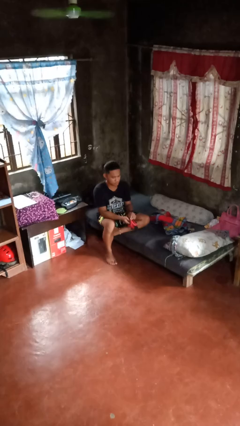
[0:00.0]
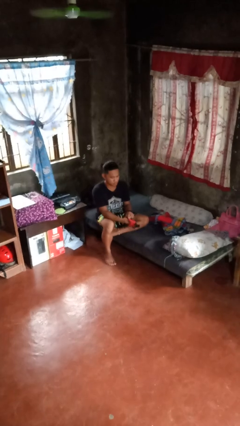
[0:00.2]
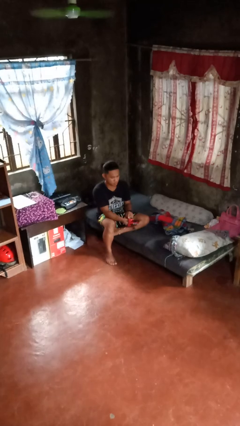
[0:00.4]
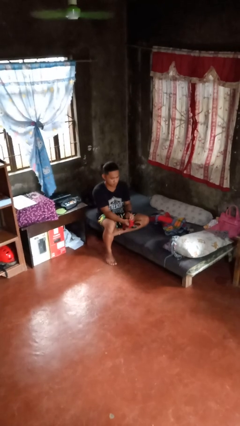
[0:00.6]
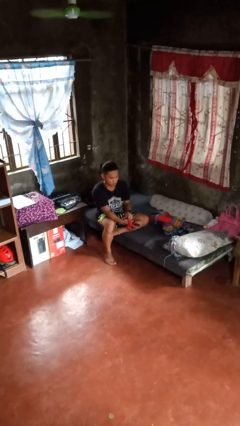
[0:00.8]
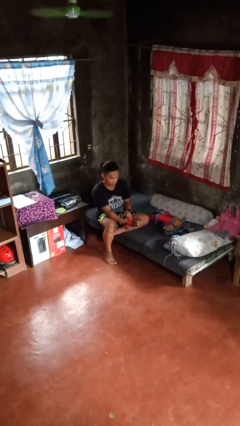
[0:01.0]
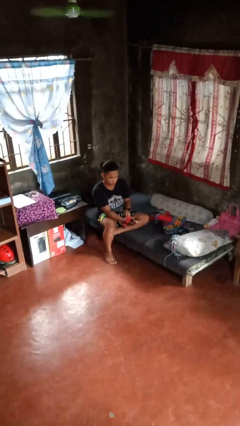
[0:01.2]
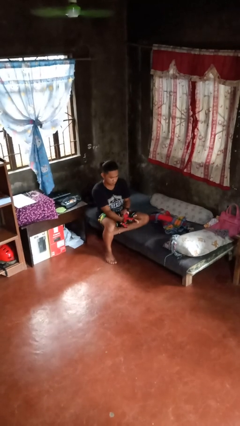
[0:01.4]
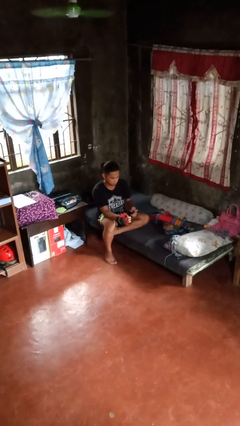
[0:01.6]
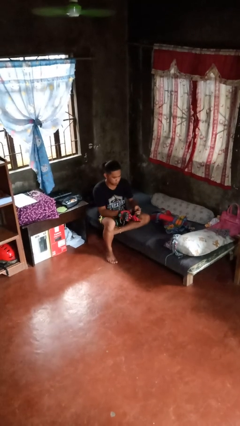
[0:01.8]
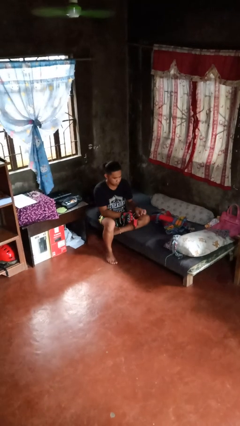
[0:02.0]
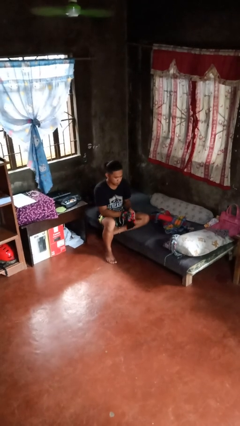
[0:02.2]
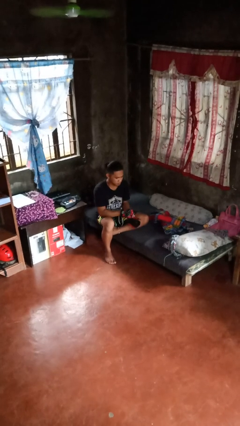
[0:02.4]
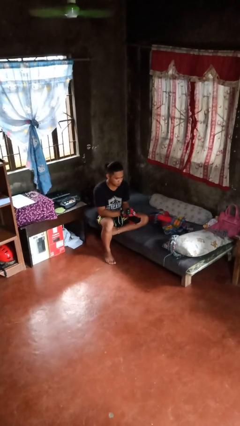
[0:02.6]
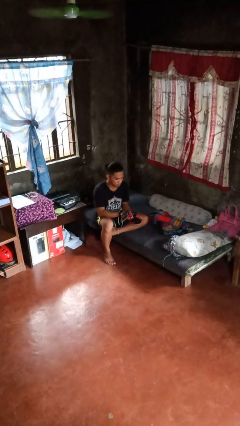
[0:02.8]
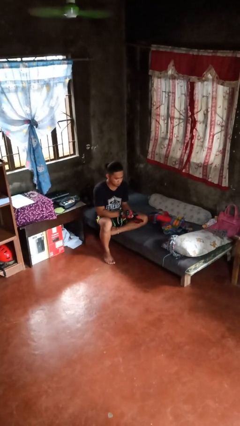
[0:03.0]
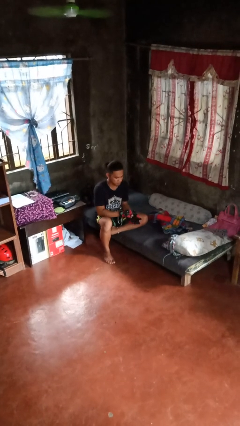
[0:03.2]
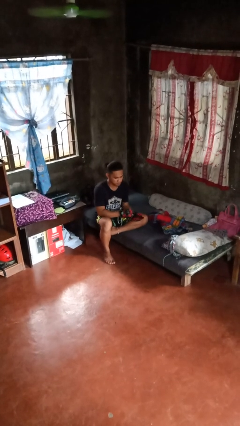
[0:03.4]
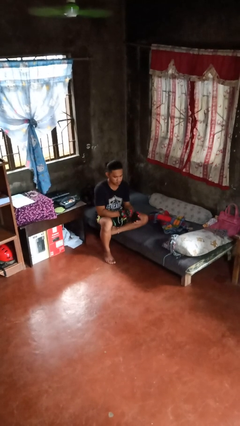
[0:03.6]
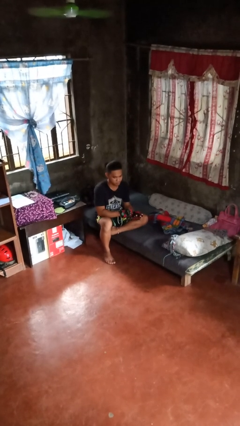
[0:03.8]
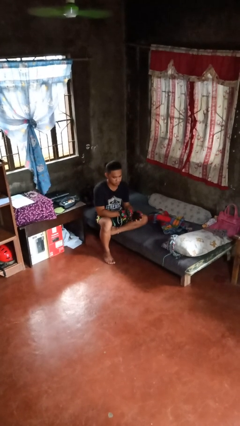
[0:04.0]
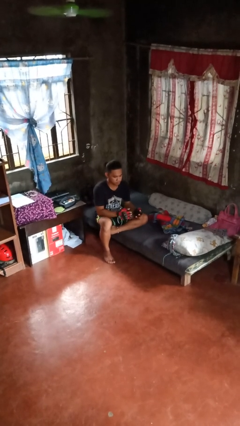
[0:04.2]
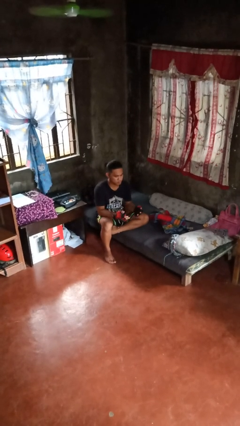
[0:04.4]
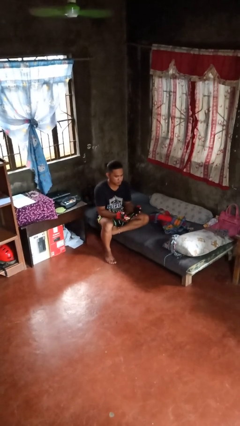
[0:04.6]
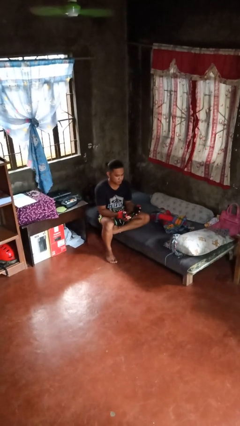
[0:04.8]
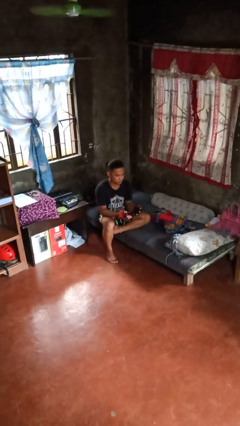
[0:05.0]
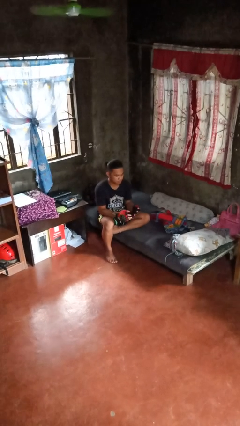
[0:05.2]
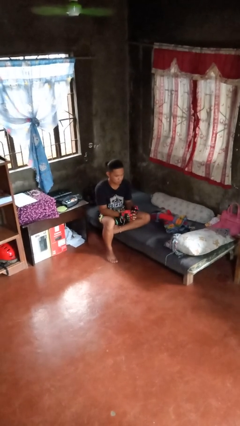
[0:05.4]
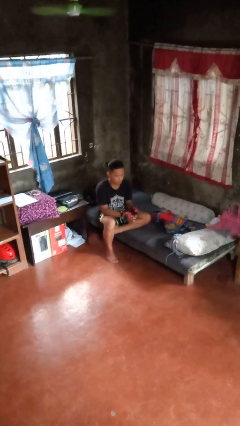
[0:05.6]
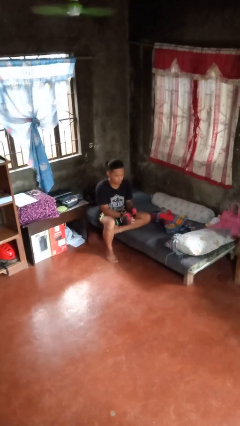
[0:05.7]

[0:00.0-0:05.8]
person puts on gloves

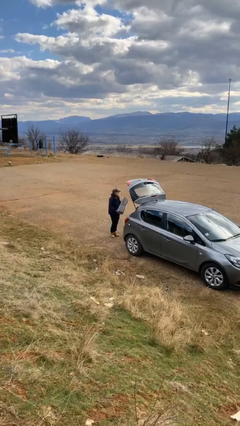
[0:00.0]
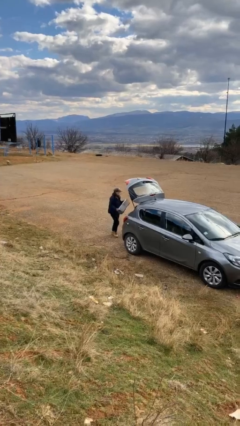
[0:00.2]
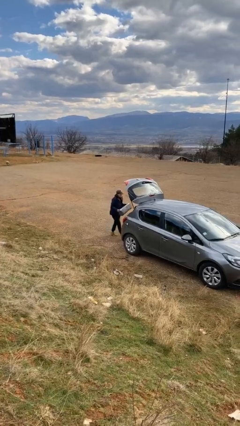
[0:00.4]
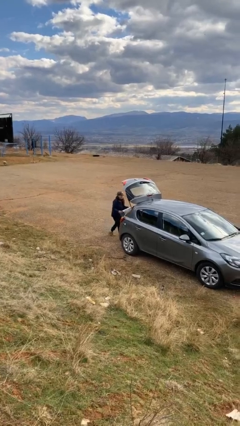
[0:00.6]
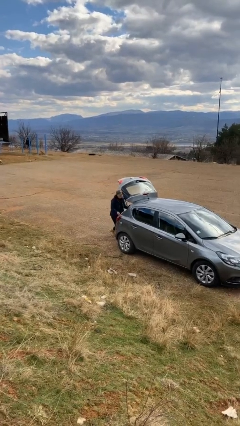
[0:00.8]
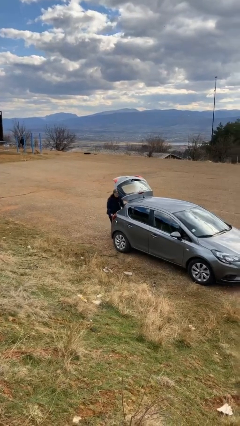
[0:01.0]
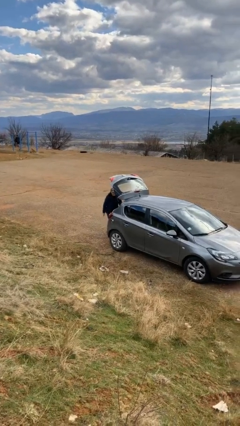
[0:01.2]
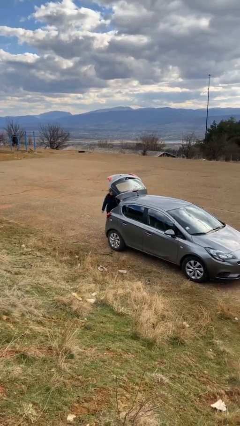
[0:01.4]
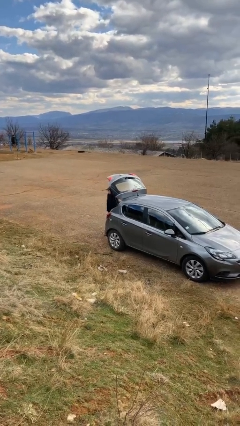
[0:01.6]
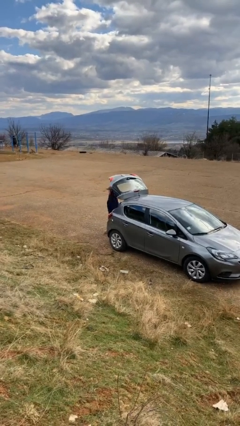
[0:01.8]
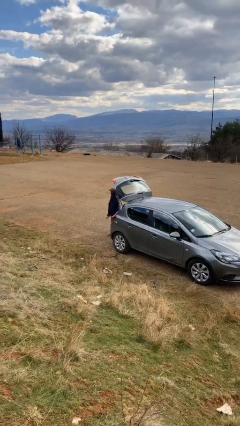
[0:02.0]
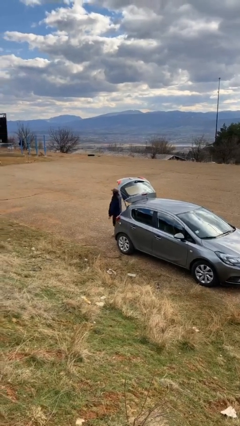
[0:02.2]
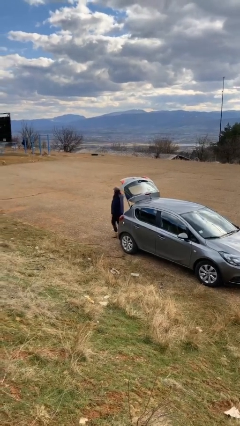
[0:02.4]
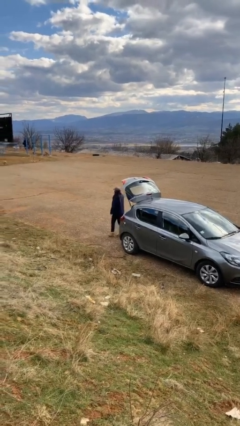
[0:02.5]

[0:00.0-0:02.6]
person loads car

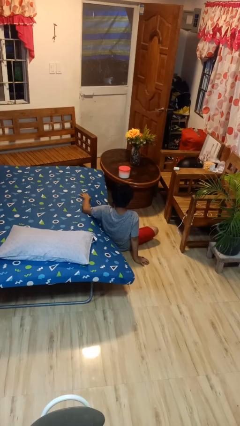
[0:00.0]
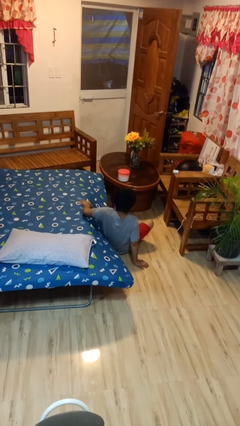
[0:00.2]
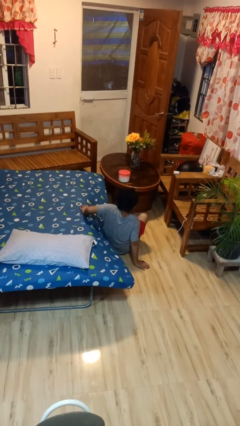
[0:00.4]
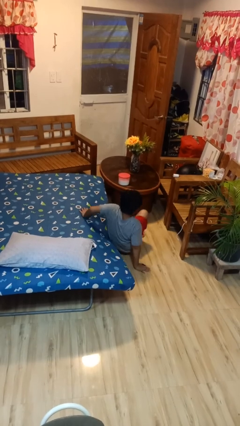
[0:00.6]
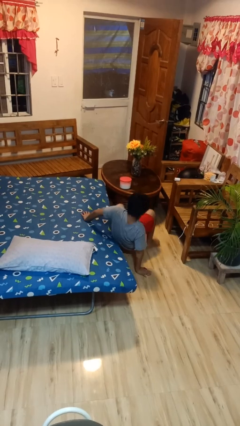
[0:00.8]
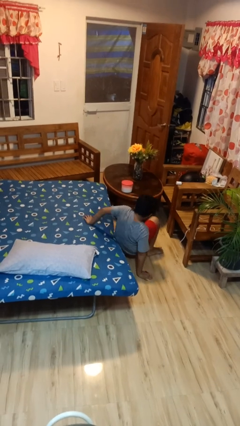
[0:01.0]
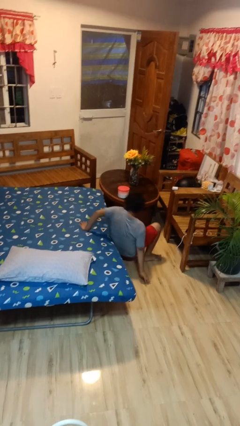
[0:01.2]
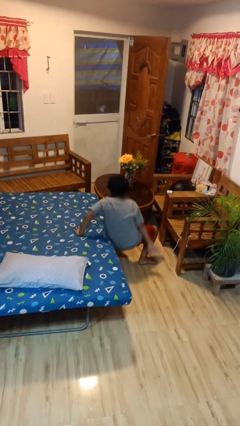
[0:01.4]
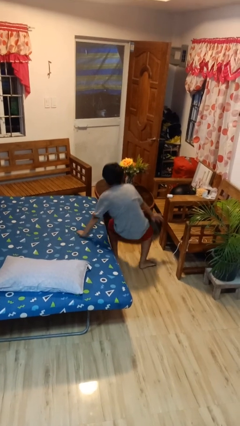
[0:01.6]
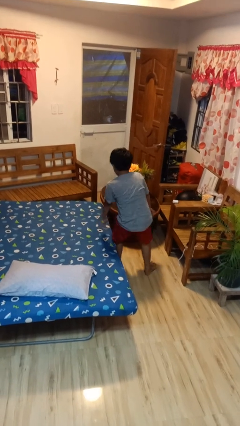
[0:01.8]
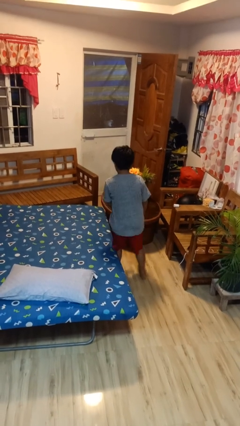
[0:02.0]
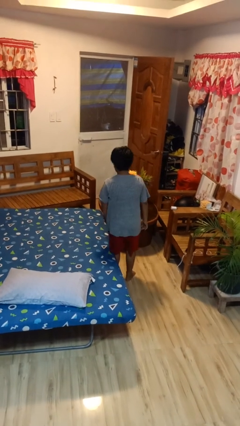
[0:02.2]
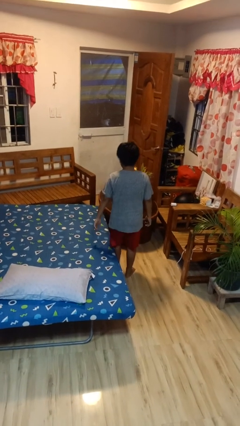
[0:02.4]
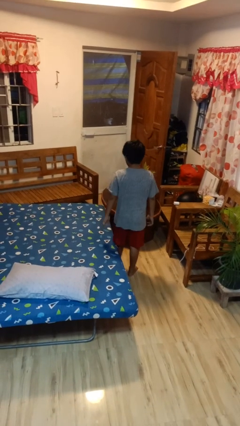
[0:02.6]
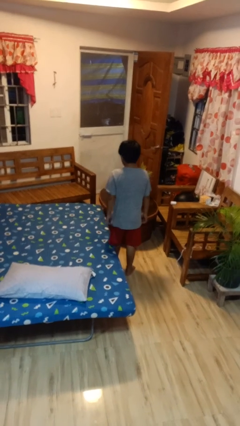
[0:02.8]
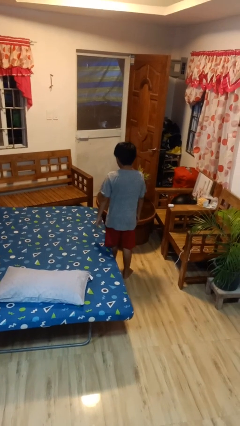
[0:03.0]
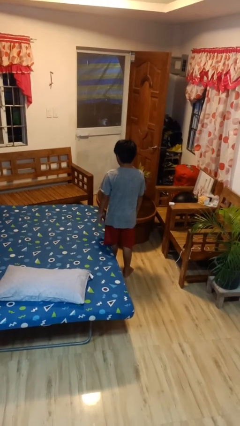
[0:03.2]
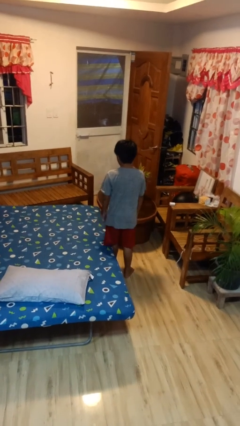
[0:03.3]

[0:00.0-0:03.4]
person stands up from floor

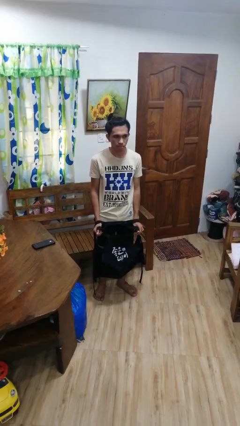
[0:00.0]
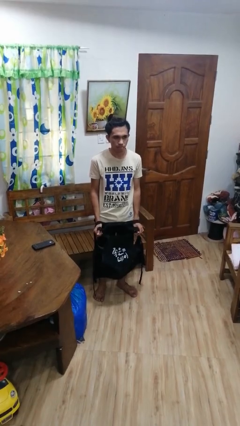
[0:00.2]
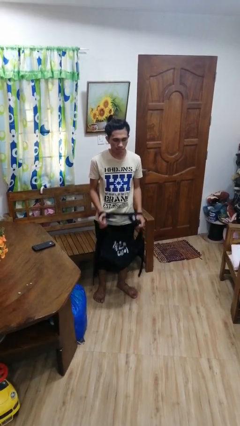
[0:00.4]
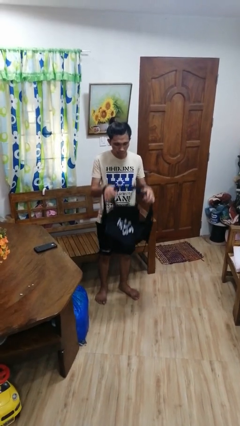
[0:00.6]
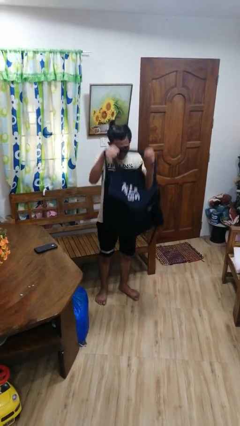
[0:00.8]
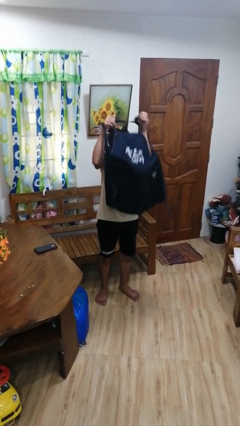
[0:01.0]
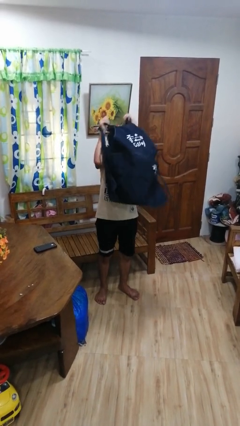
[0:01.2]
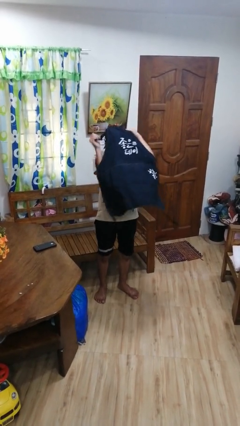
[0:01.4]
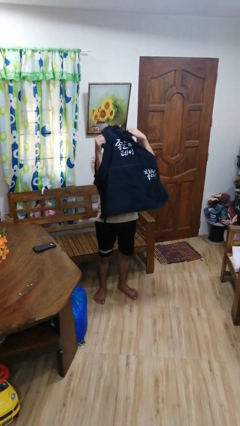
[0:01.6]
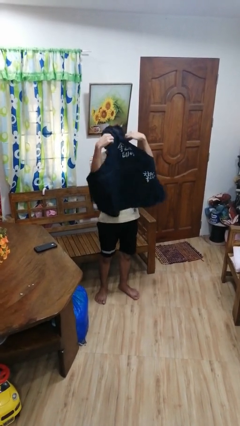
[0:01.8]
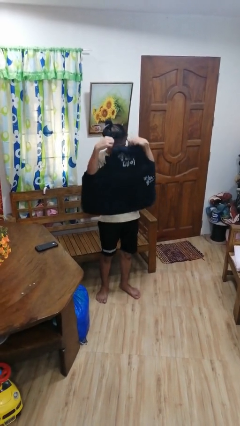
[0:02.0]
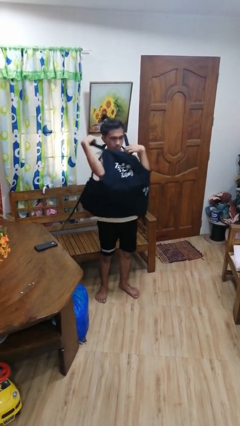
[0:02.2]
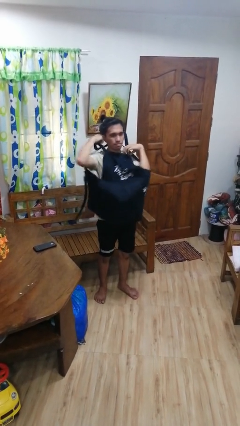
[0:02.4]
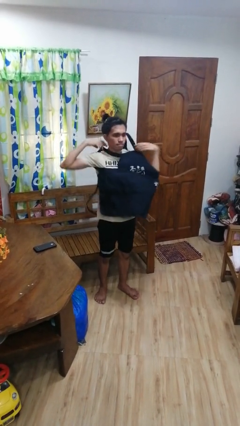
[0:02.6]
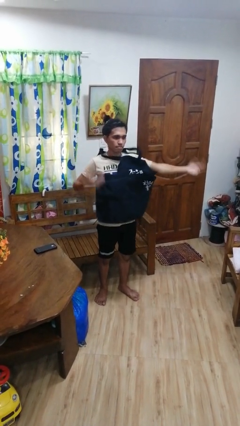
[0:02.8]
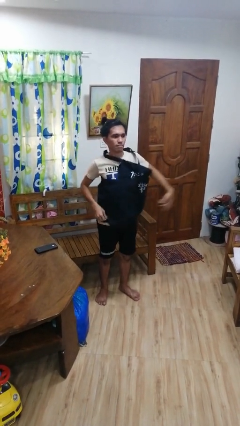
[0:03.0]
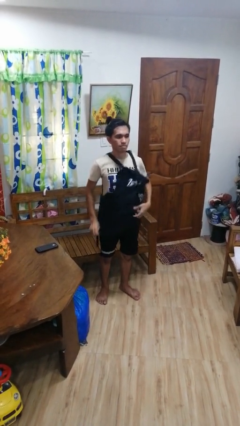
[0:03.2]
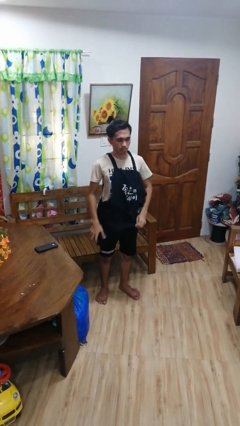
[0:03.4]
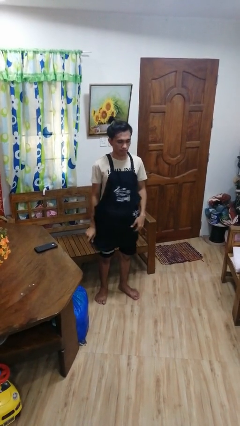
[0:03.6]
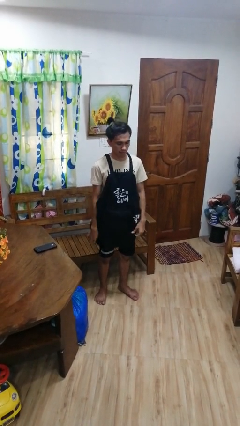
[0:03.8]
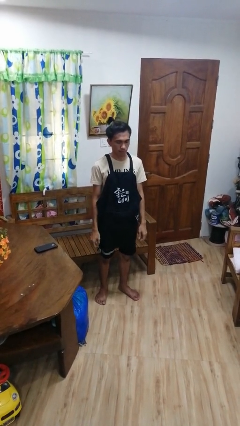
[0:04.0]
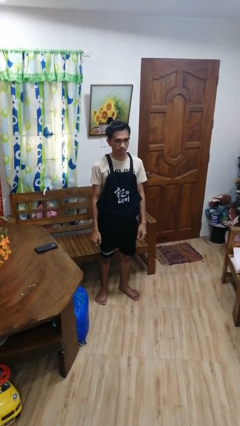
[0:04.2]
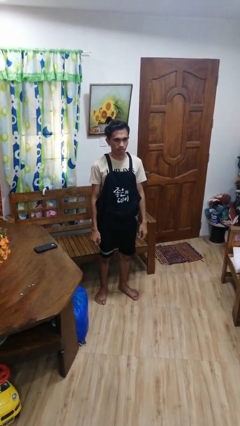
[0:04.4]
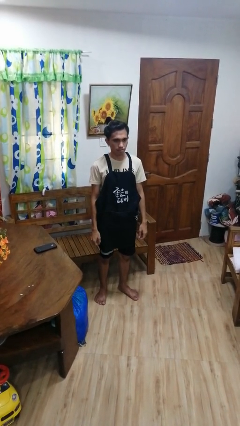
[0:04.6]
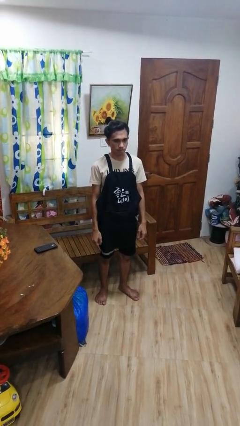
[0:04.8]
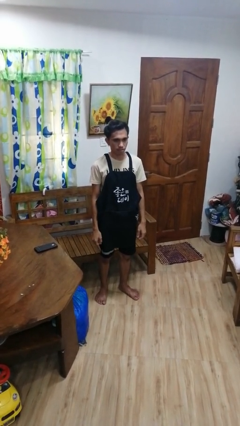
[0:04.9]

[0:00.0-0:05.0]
person puts on apron

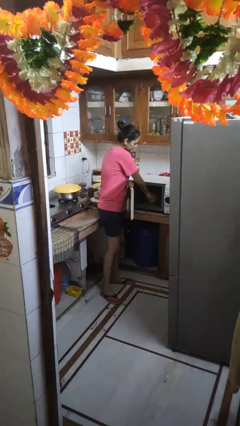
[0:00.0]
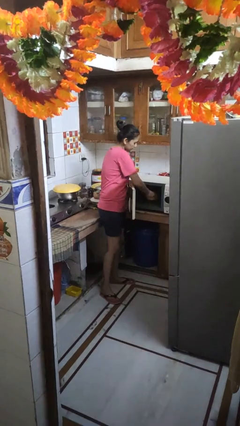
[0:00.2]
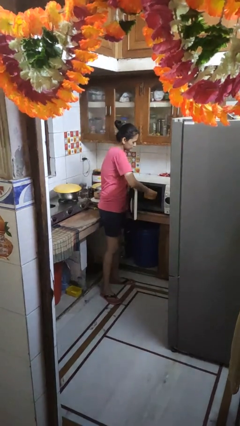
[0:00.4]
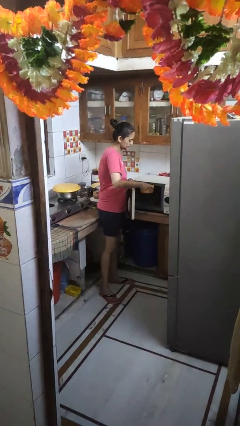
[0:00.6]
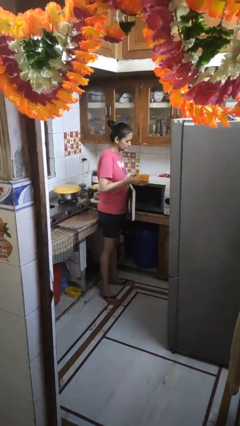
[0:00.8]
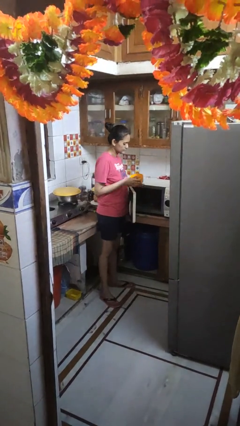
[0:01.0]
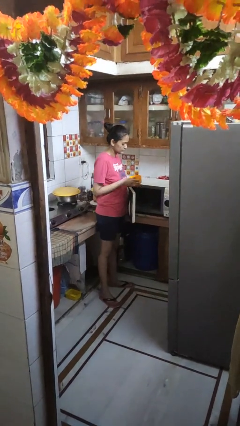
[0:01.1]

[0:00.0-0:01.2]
person takes object from microwave
